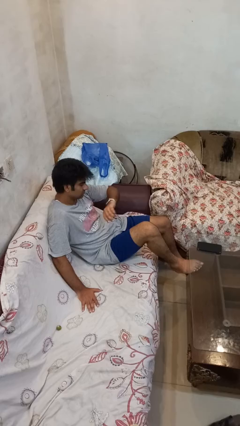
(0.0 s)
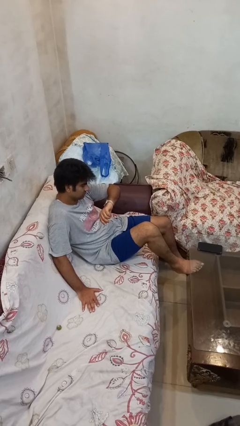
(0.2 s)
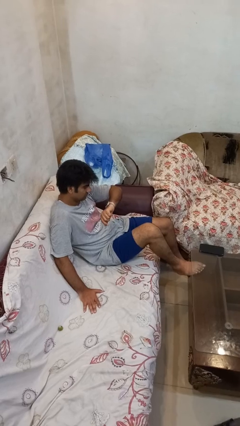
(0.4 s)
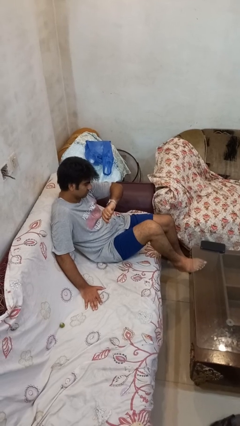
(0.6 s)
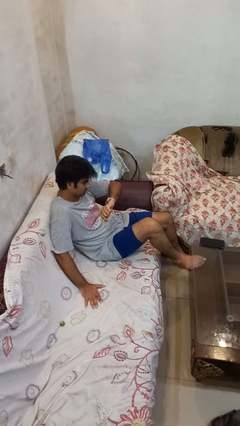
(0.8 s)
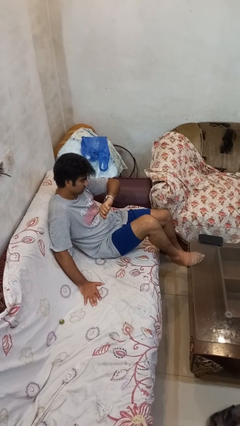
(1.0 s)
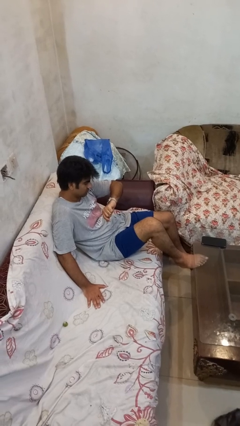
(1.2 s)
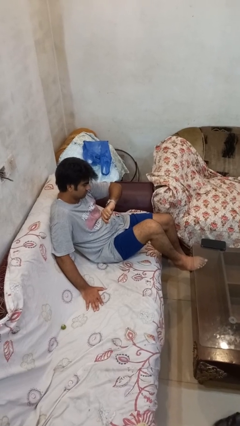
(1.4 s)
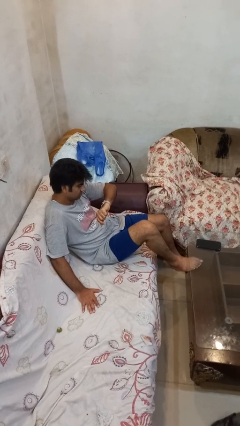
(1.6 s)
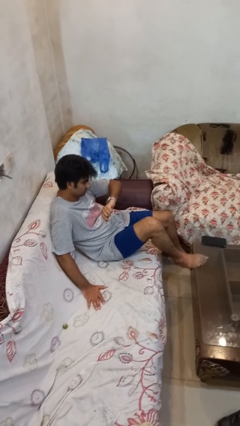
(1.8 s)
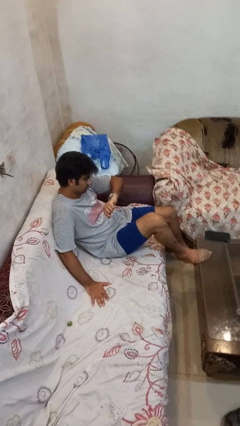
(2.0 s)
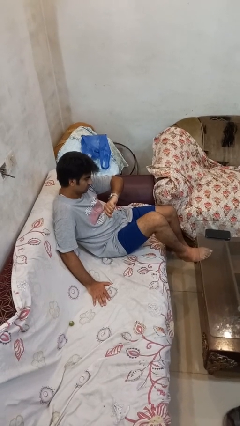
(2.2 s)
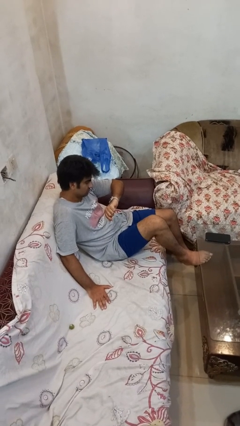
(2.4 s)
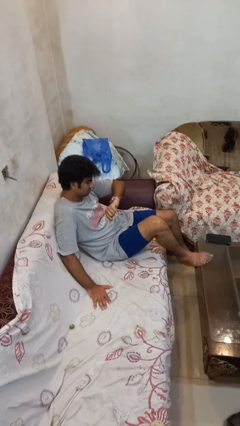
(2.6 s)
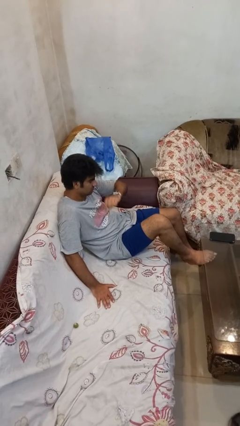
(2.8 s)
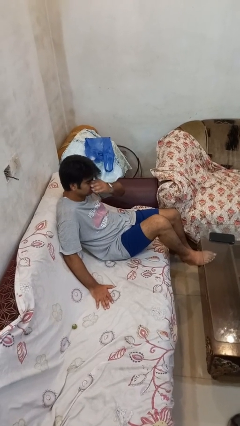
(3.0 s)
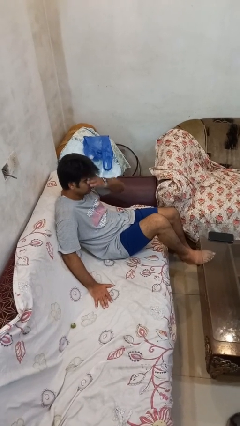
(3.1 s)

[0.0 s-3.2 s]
person looks at wristwatch

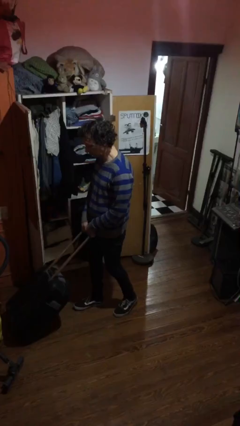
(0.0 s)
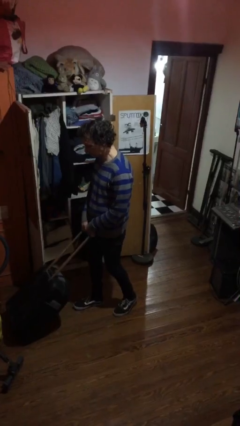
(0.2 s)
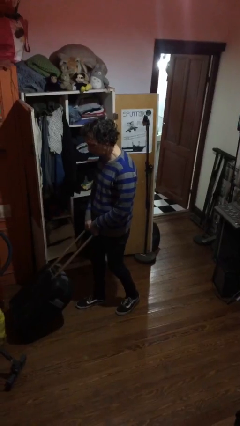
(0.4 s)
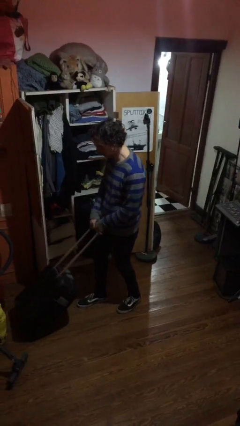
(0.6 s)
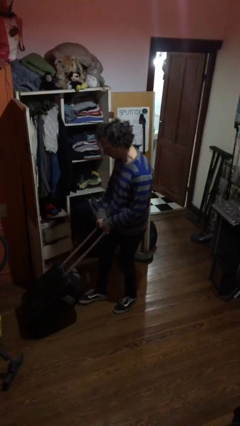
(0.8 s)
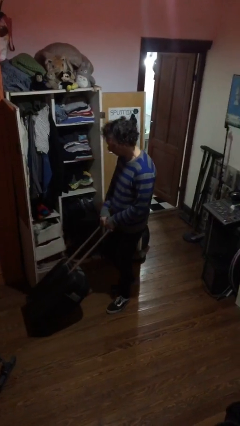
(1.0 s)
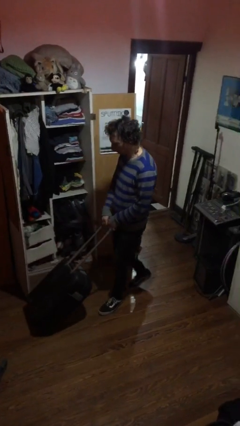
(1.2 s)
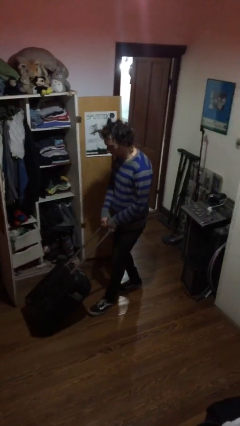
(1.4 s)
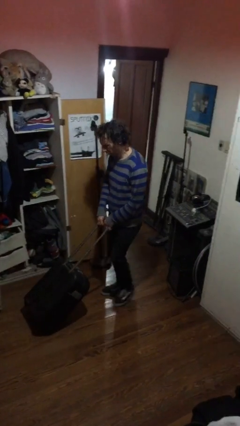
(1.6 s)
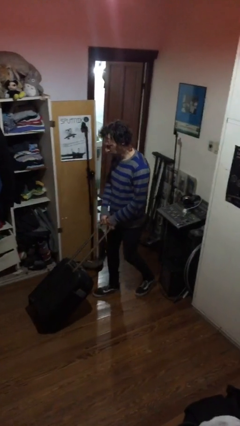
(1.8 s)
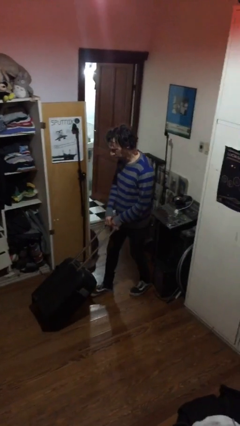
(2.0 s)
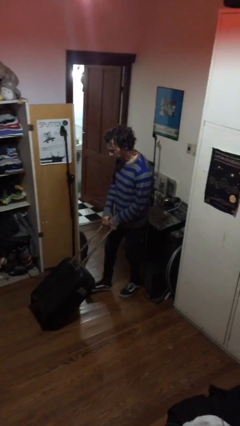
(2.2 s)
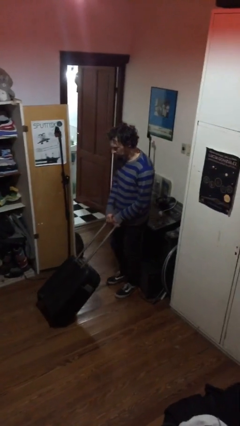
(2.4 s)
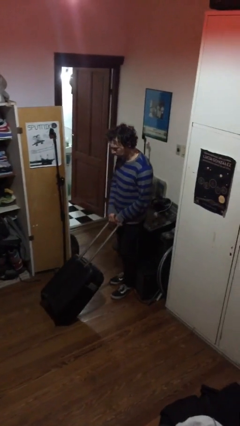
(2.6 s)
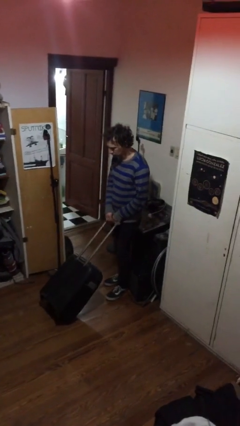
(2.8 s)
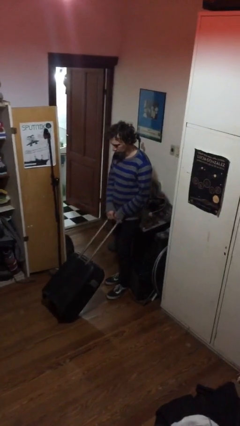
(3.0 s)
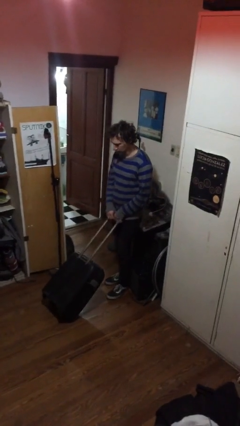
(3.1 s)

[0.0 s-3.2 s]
person pulls wheeled cart

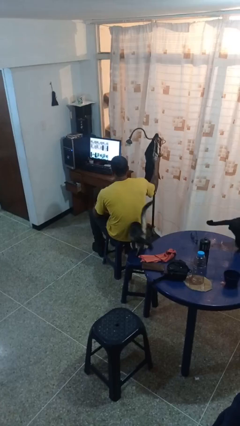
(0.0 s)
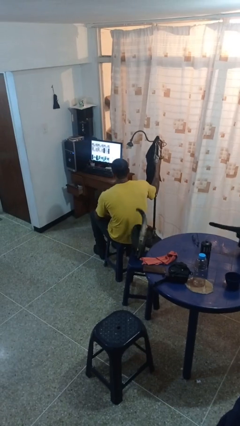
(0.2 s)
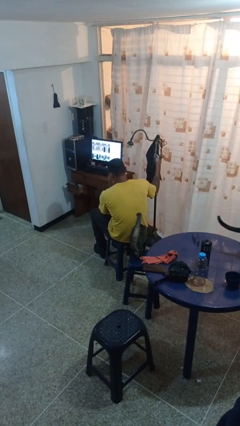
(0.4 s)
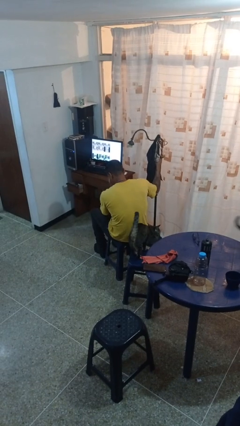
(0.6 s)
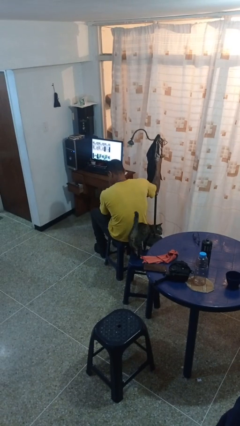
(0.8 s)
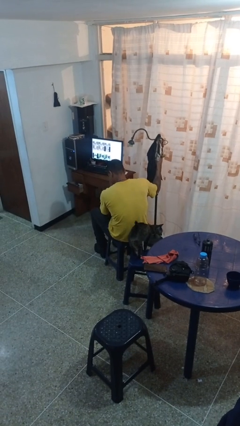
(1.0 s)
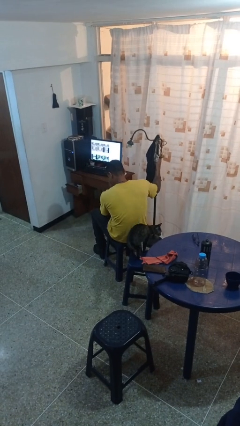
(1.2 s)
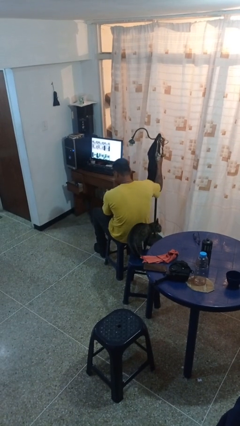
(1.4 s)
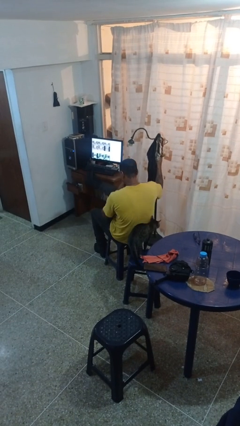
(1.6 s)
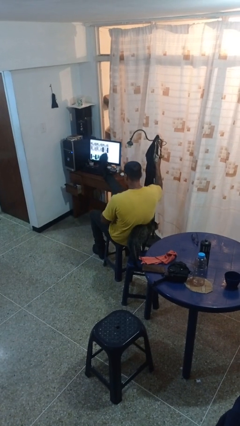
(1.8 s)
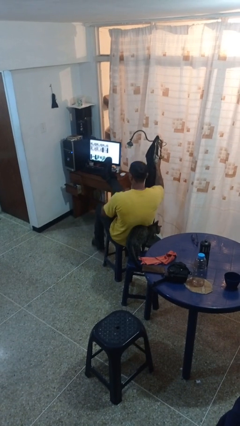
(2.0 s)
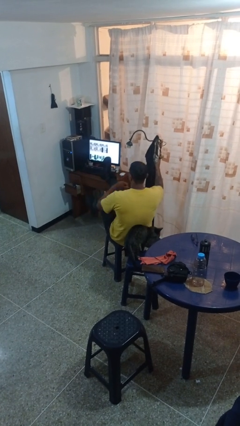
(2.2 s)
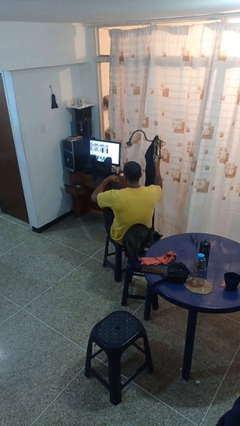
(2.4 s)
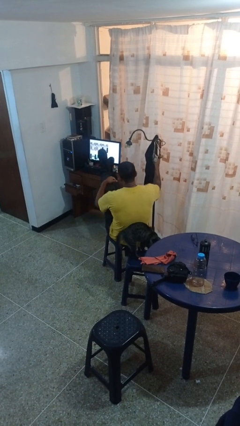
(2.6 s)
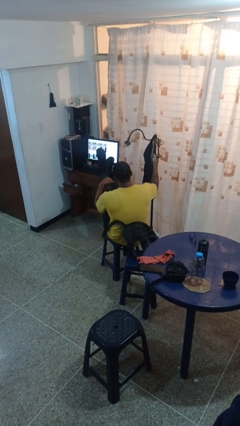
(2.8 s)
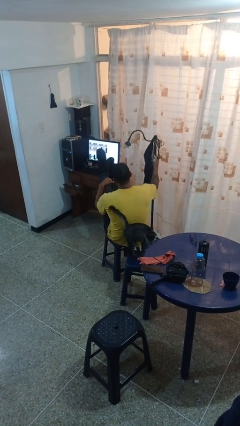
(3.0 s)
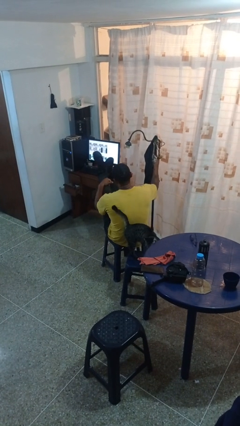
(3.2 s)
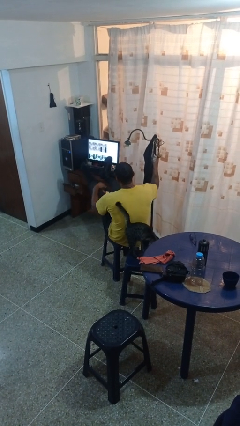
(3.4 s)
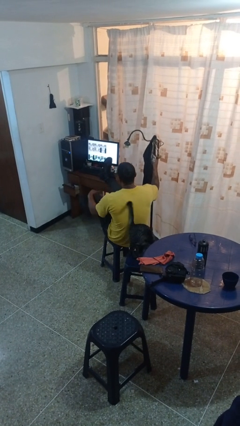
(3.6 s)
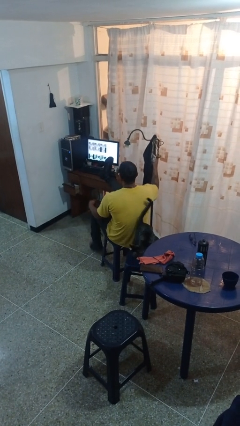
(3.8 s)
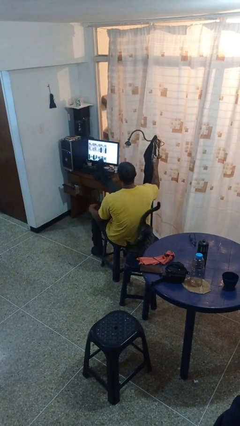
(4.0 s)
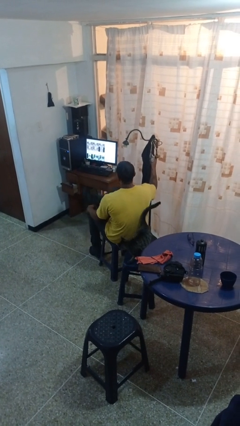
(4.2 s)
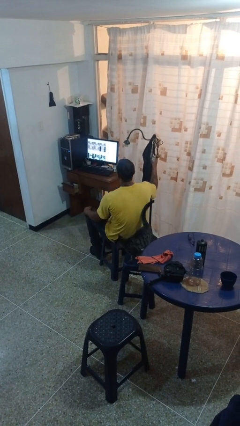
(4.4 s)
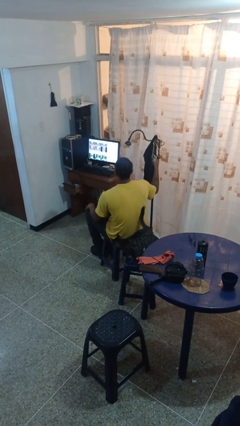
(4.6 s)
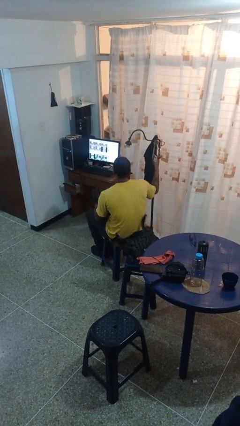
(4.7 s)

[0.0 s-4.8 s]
person puts feet up

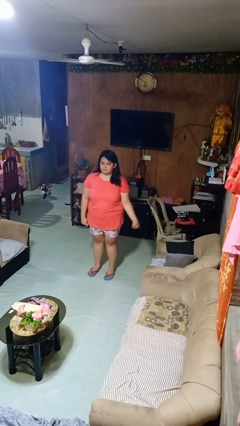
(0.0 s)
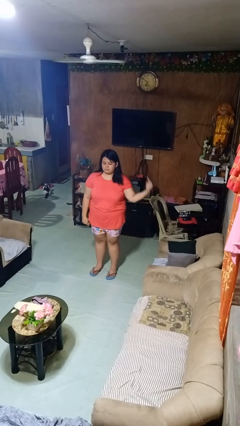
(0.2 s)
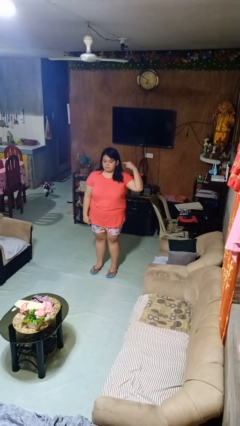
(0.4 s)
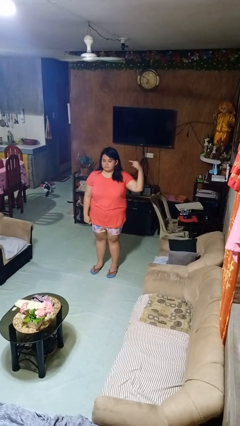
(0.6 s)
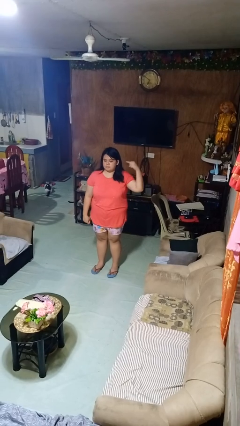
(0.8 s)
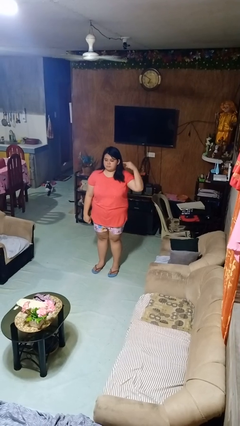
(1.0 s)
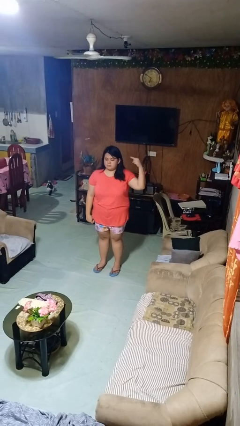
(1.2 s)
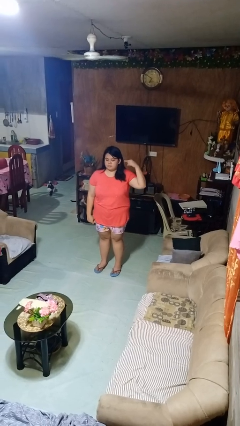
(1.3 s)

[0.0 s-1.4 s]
person gestures listen closely

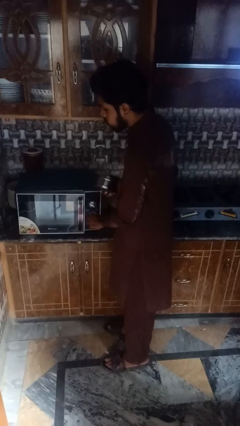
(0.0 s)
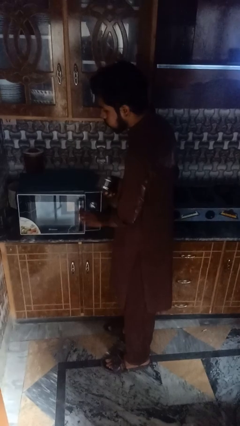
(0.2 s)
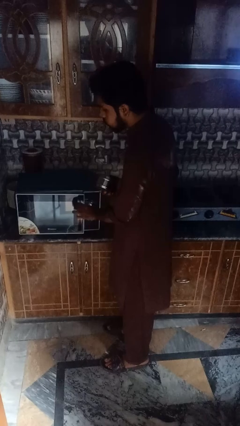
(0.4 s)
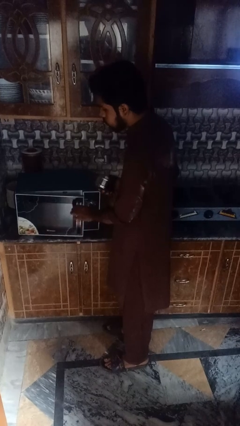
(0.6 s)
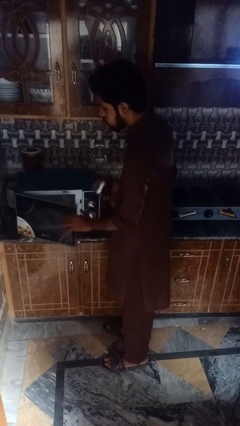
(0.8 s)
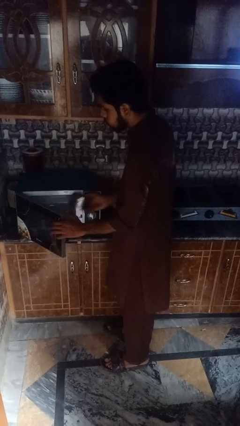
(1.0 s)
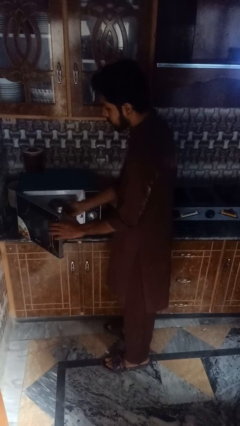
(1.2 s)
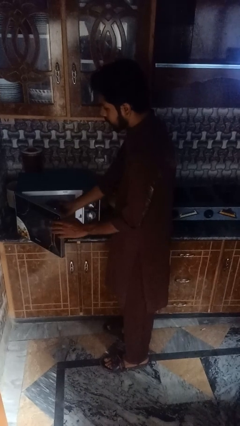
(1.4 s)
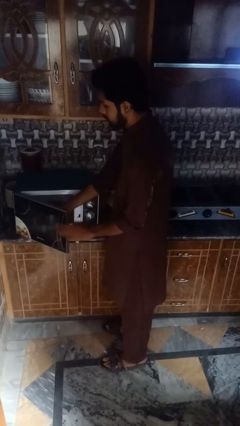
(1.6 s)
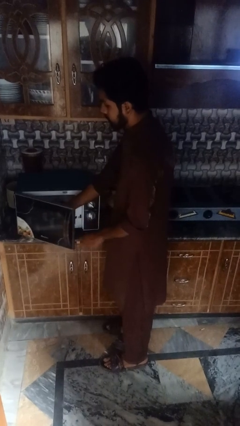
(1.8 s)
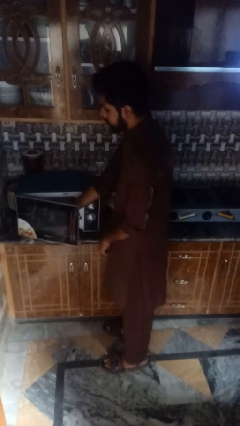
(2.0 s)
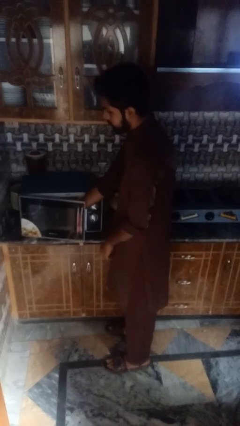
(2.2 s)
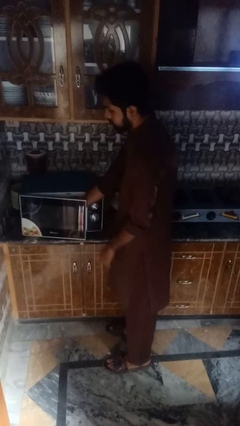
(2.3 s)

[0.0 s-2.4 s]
person puts object into microwave

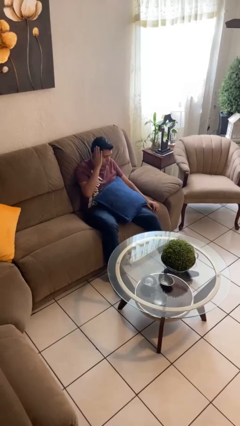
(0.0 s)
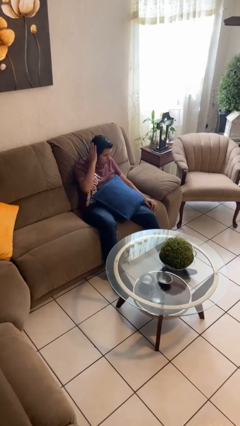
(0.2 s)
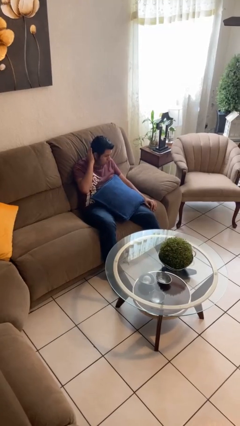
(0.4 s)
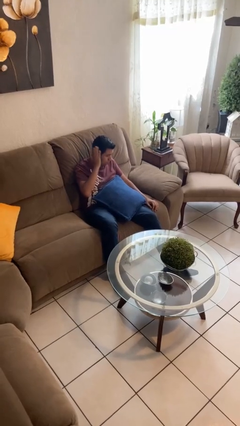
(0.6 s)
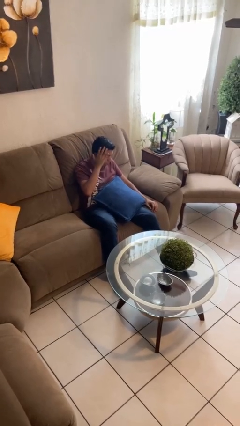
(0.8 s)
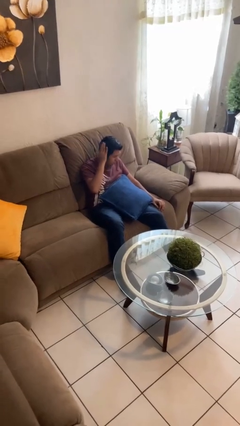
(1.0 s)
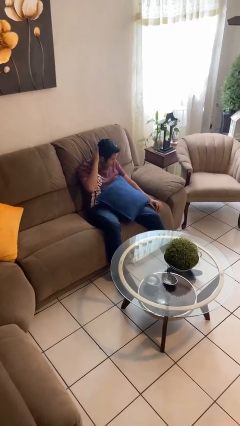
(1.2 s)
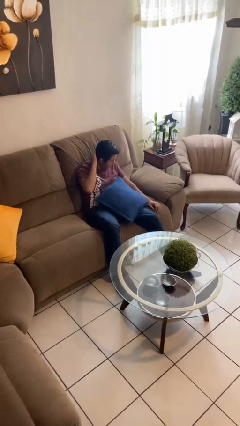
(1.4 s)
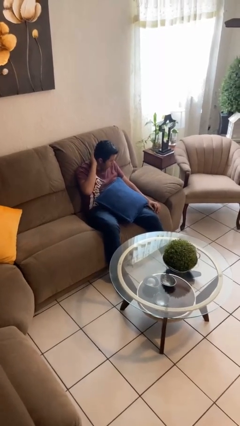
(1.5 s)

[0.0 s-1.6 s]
person strokes hair

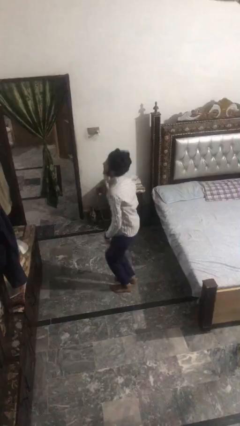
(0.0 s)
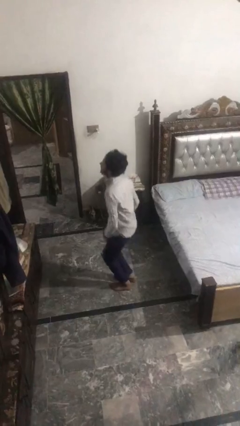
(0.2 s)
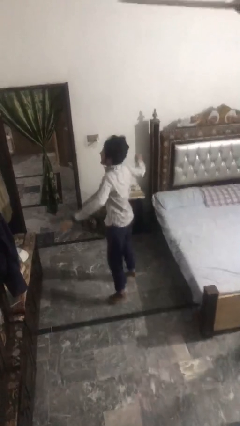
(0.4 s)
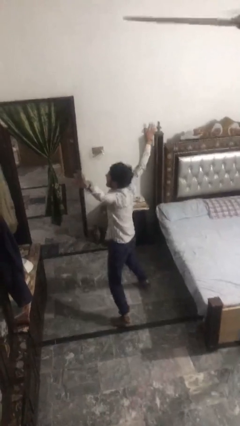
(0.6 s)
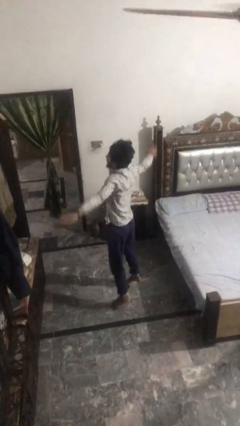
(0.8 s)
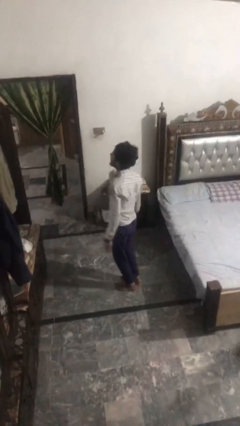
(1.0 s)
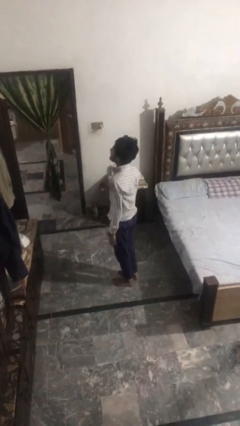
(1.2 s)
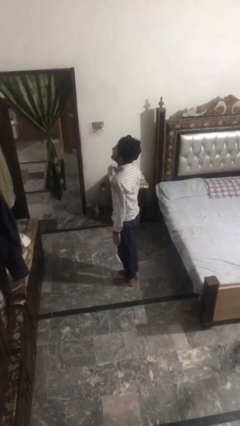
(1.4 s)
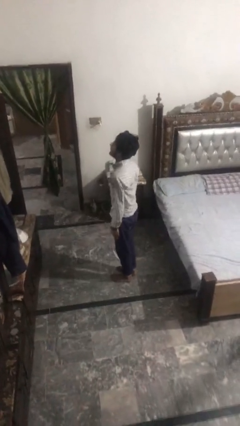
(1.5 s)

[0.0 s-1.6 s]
person exercises with jumping jacks
